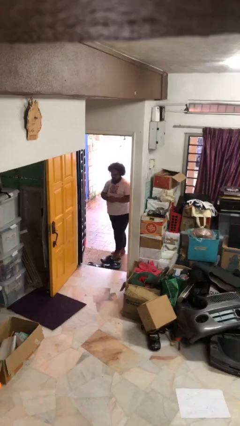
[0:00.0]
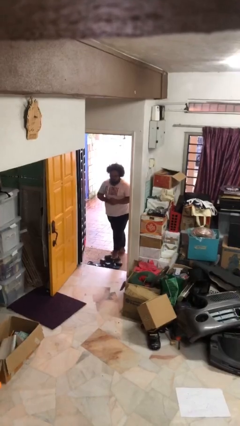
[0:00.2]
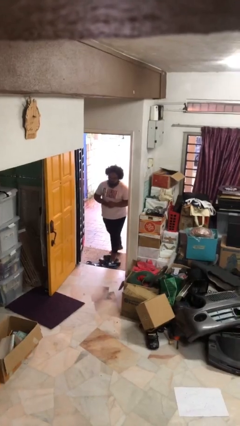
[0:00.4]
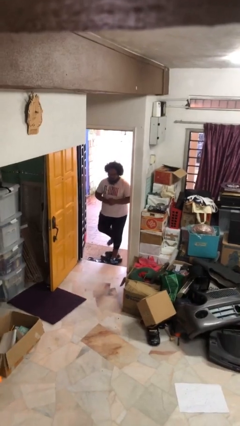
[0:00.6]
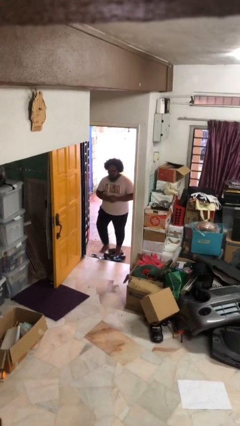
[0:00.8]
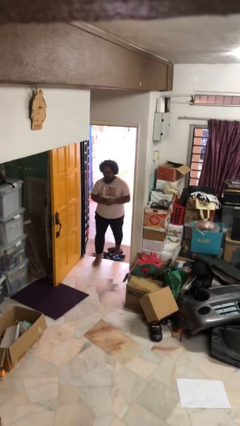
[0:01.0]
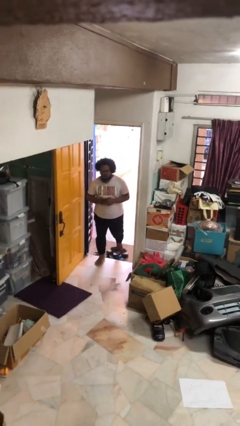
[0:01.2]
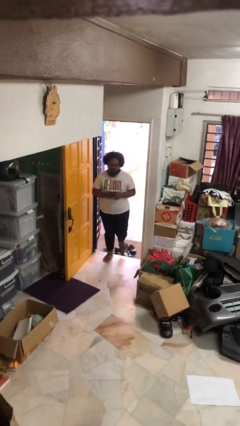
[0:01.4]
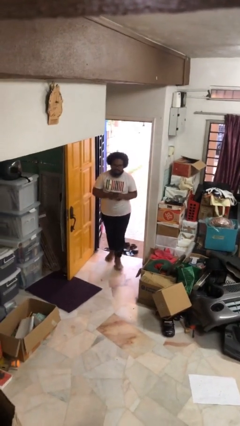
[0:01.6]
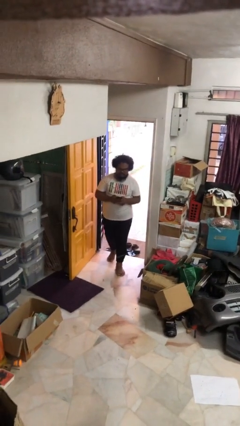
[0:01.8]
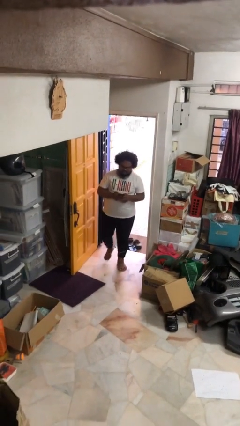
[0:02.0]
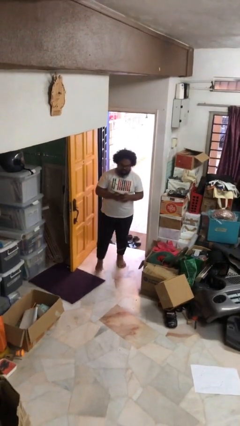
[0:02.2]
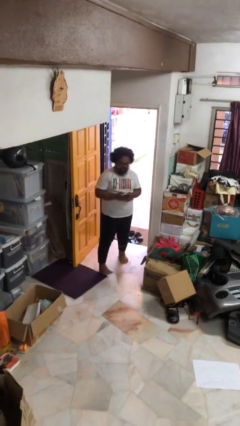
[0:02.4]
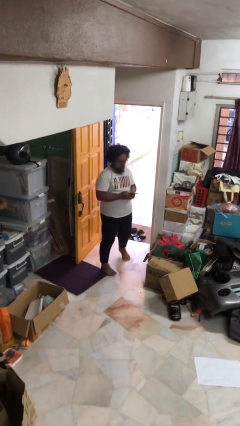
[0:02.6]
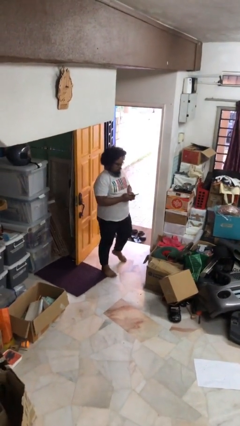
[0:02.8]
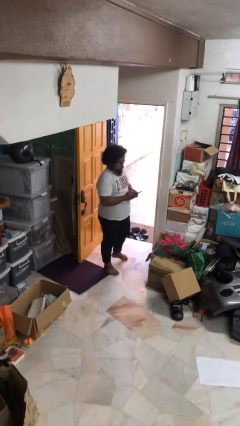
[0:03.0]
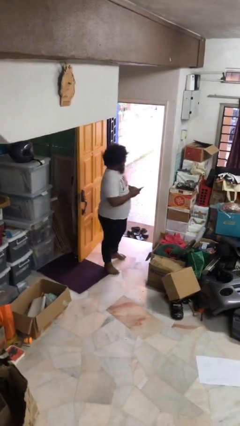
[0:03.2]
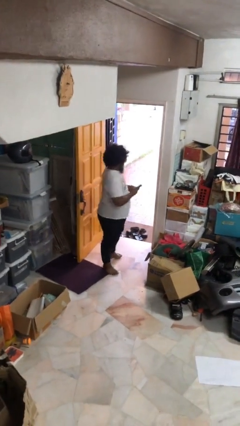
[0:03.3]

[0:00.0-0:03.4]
person enters scene through structure

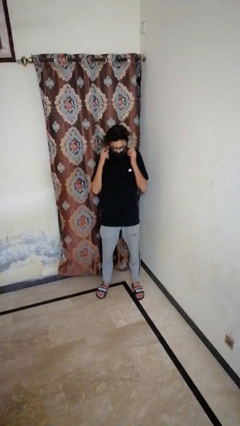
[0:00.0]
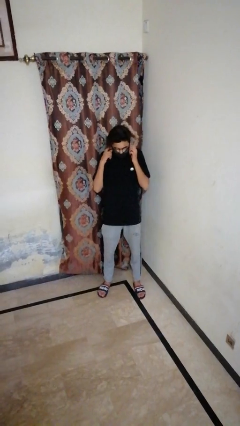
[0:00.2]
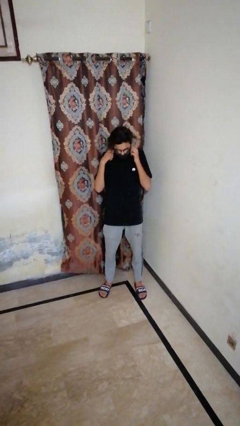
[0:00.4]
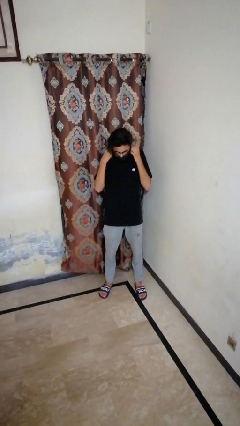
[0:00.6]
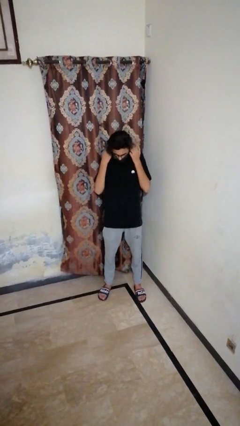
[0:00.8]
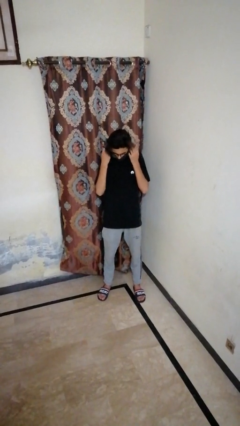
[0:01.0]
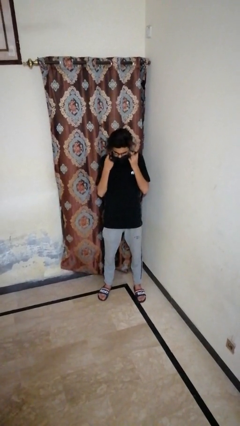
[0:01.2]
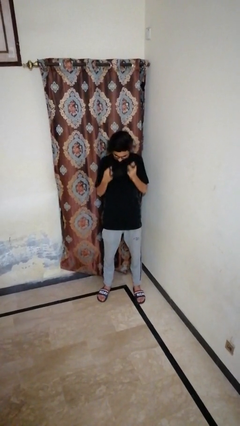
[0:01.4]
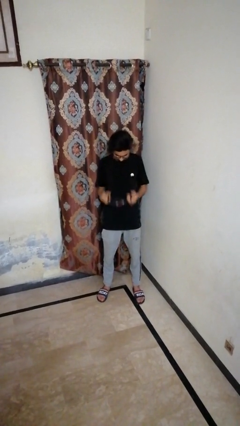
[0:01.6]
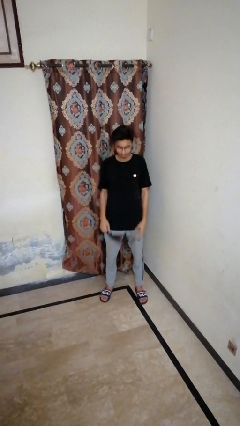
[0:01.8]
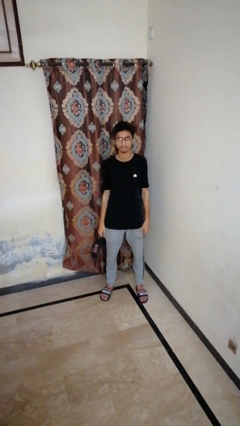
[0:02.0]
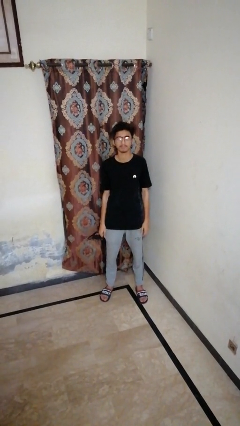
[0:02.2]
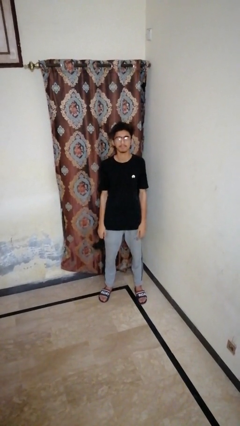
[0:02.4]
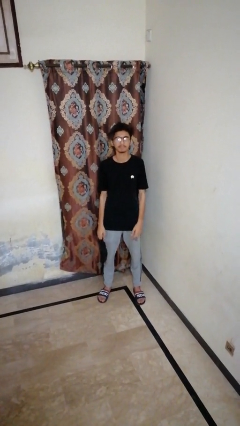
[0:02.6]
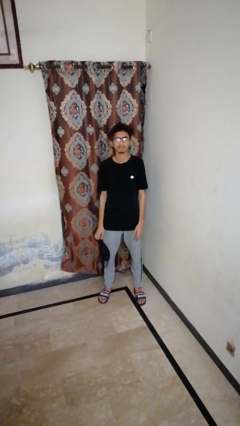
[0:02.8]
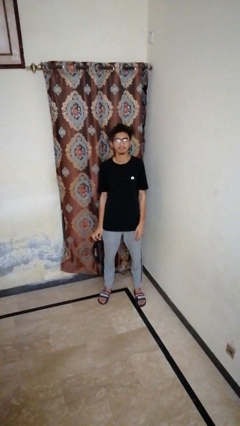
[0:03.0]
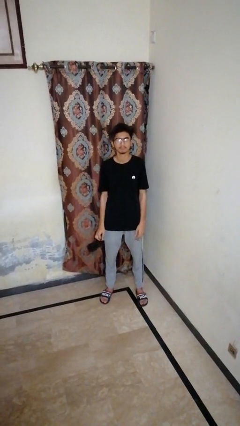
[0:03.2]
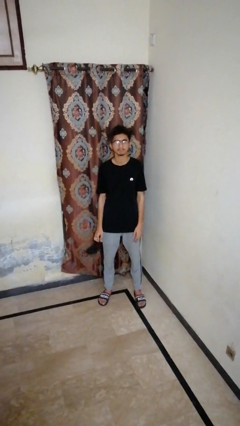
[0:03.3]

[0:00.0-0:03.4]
person takes off facemask

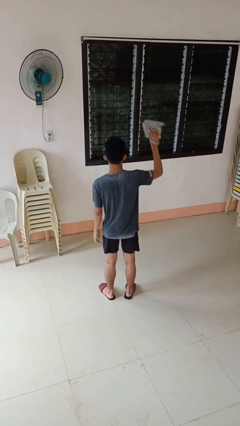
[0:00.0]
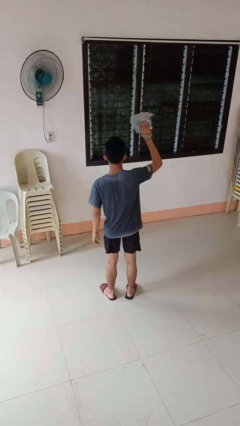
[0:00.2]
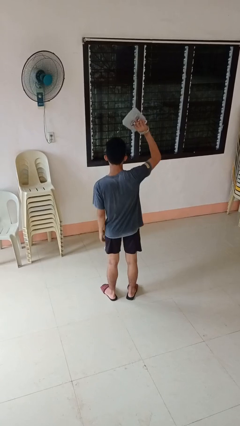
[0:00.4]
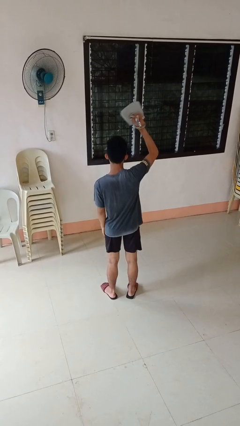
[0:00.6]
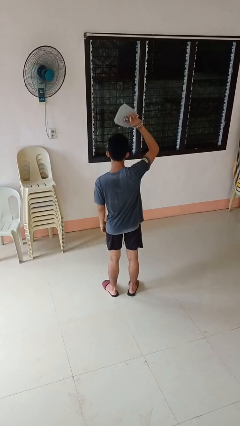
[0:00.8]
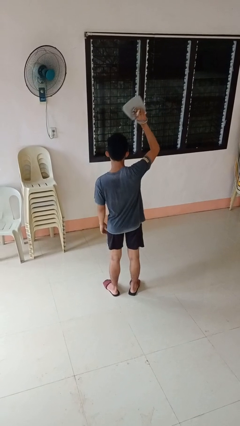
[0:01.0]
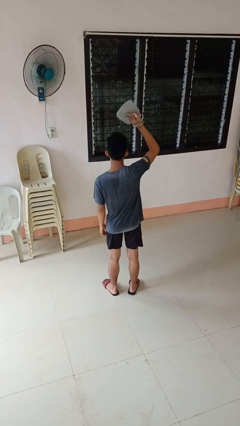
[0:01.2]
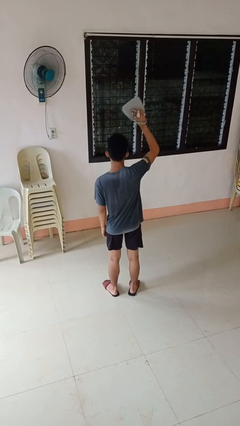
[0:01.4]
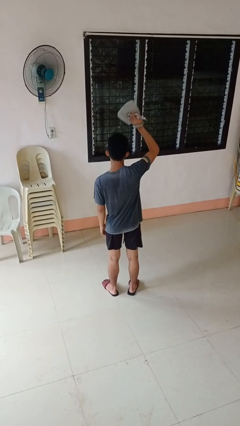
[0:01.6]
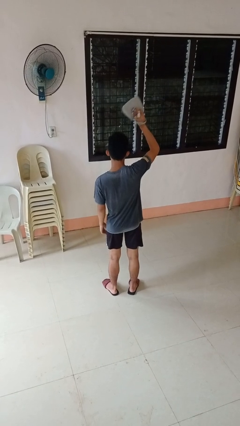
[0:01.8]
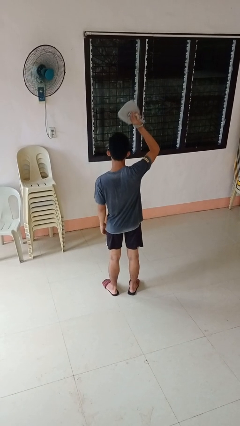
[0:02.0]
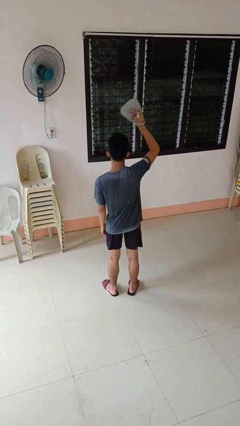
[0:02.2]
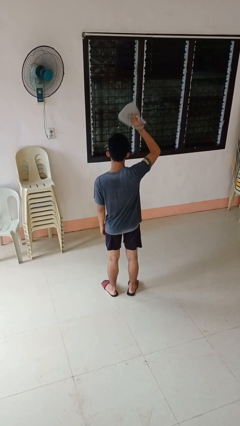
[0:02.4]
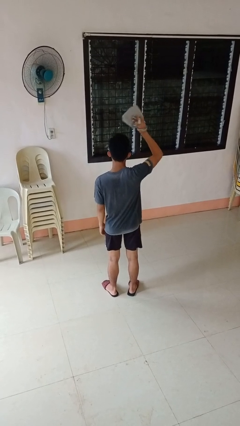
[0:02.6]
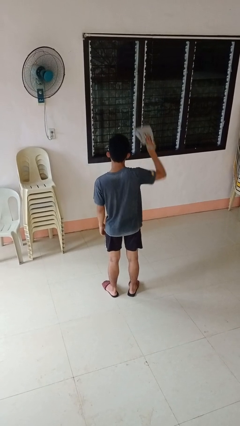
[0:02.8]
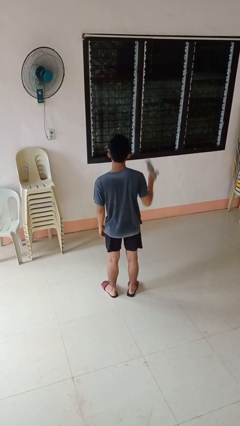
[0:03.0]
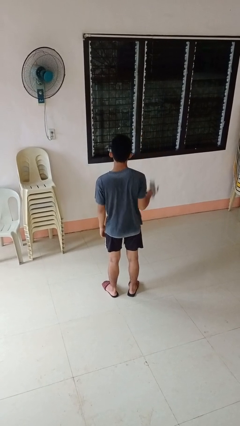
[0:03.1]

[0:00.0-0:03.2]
person holds object above head

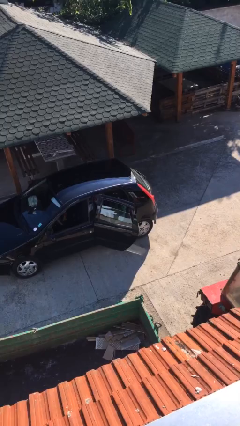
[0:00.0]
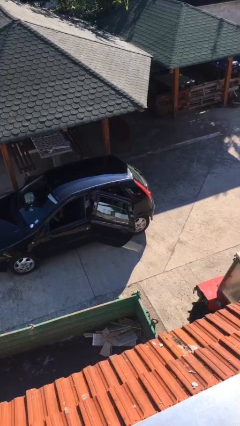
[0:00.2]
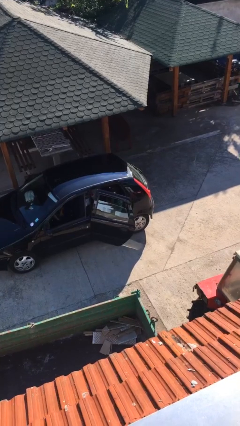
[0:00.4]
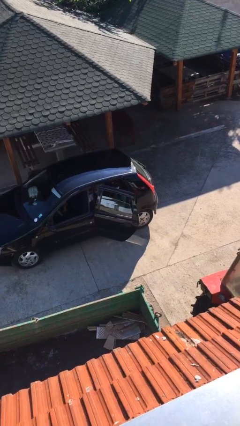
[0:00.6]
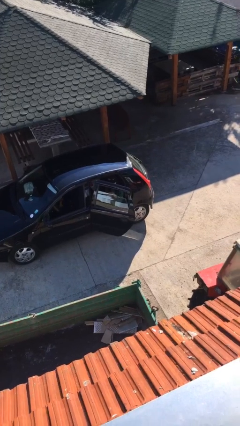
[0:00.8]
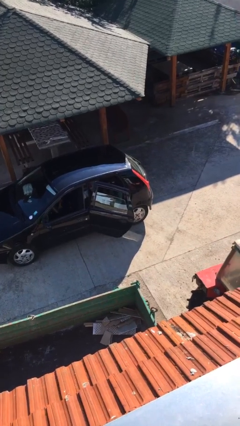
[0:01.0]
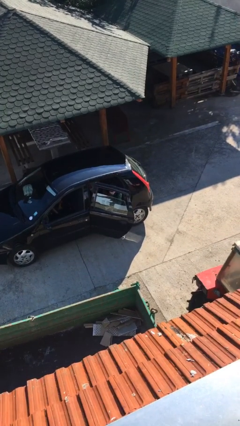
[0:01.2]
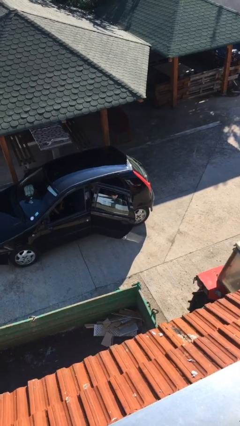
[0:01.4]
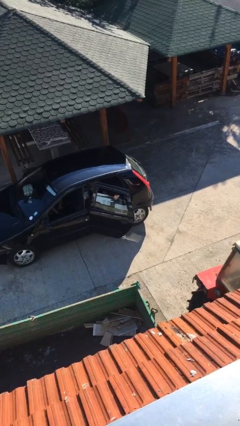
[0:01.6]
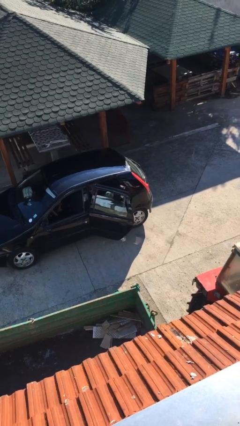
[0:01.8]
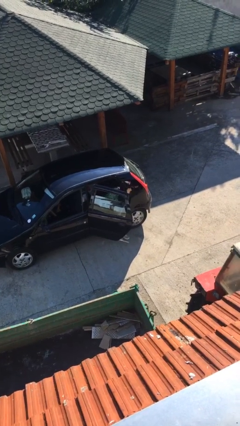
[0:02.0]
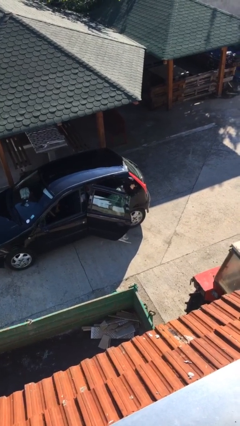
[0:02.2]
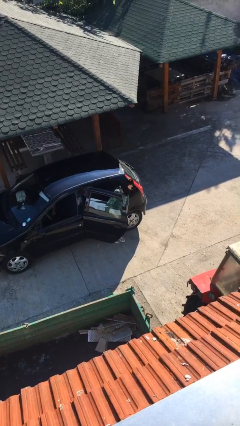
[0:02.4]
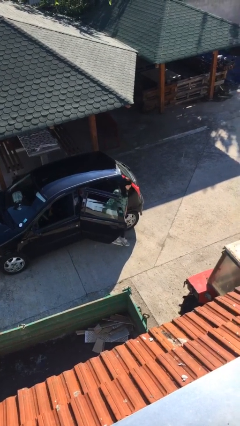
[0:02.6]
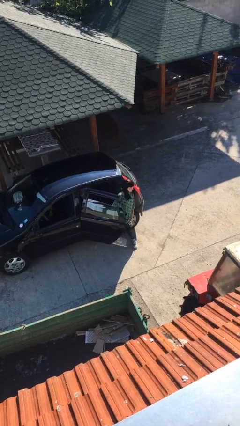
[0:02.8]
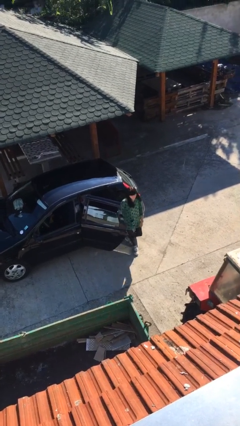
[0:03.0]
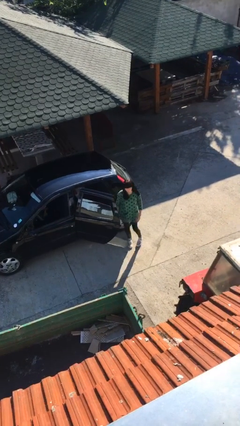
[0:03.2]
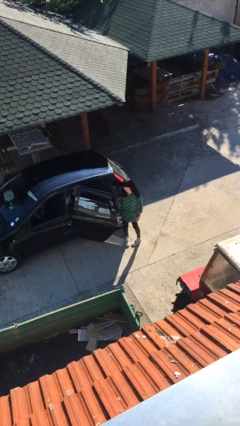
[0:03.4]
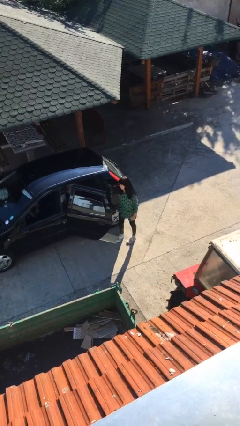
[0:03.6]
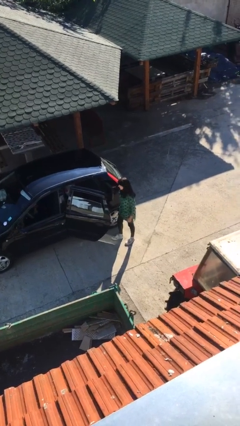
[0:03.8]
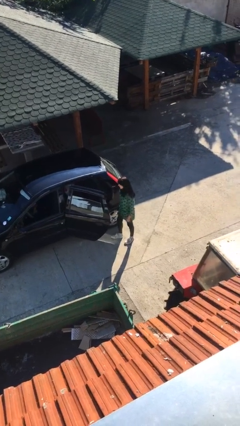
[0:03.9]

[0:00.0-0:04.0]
person exits car

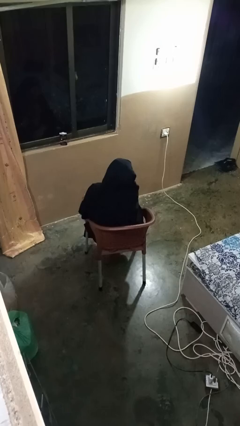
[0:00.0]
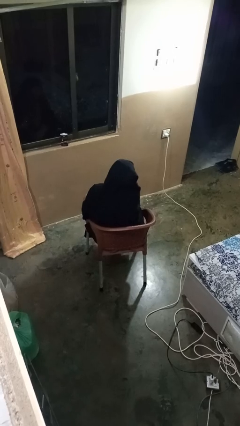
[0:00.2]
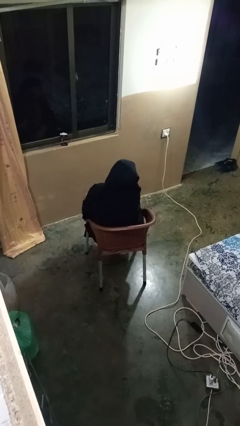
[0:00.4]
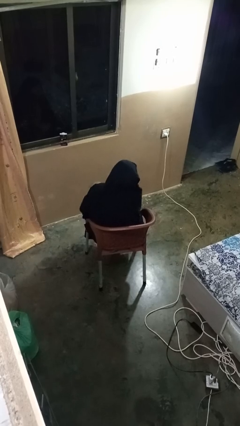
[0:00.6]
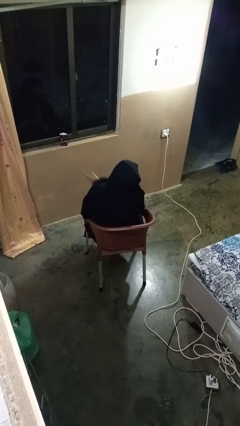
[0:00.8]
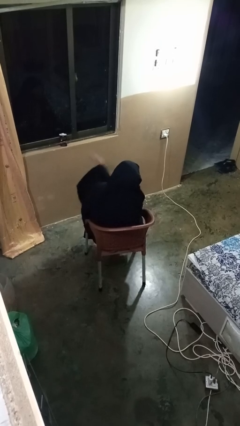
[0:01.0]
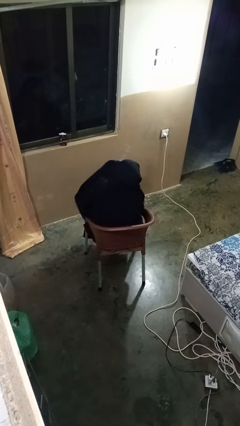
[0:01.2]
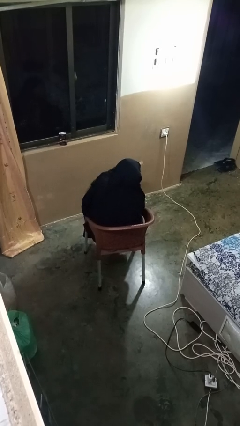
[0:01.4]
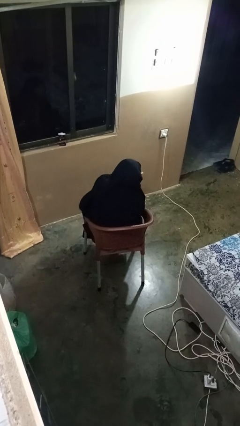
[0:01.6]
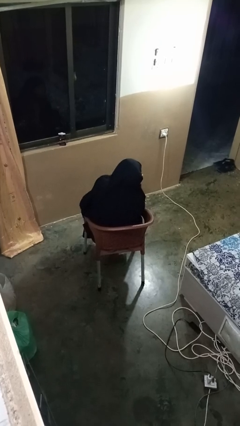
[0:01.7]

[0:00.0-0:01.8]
person gestures swipe right

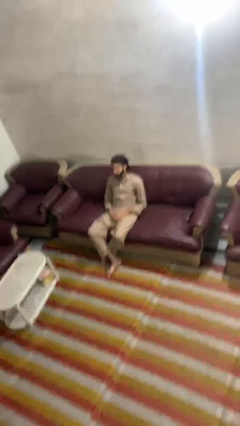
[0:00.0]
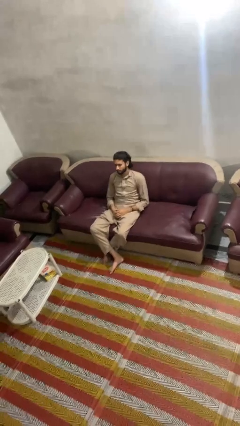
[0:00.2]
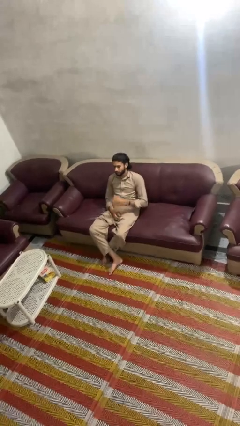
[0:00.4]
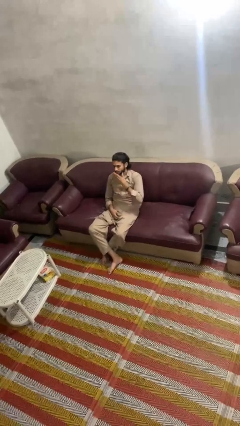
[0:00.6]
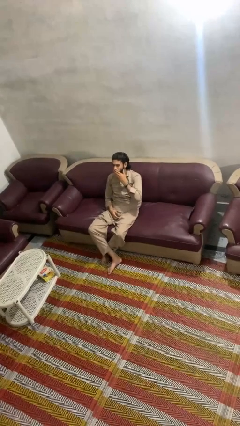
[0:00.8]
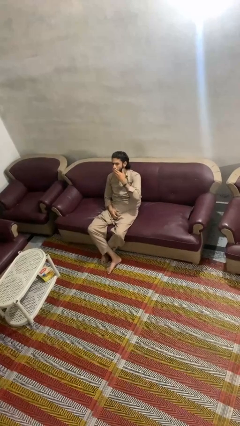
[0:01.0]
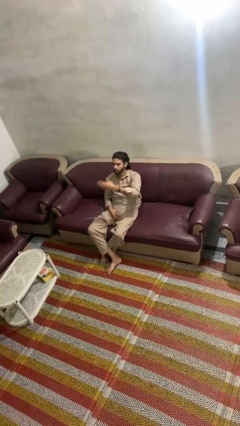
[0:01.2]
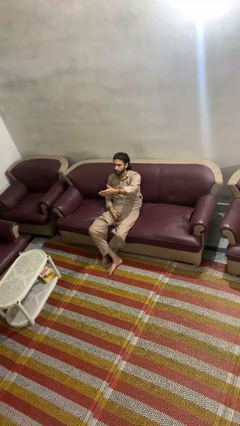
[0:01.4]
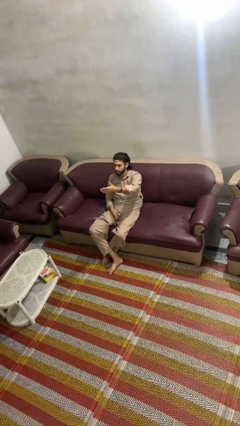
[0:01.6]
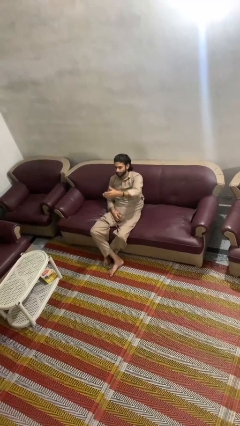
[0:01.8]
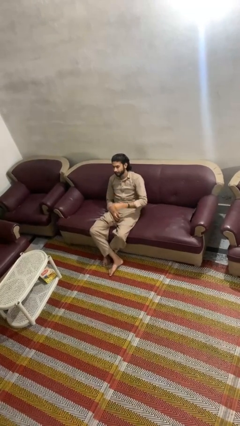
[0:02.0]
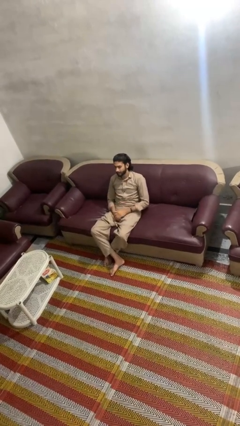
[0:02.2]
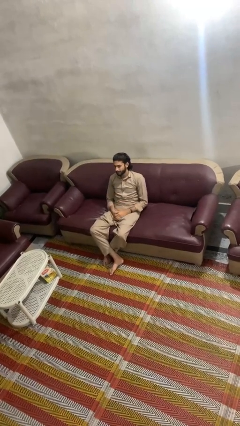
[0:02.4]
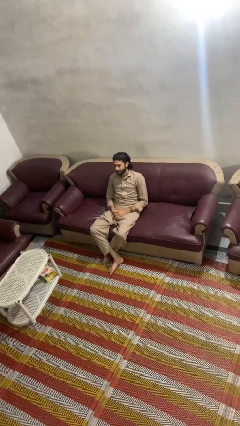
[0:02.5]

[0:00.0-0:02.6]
person gestures blow kiss
